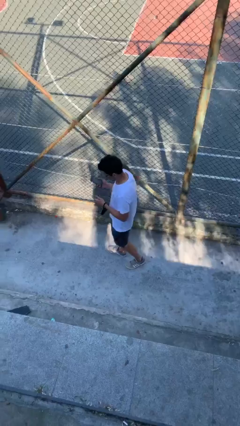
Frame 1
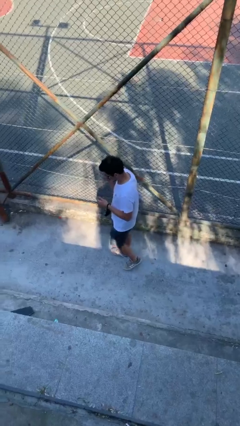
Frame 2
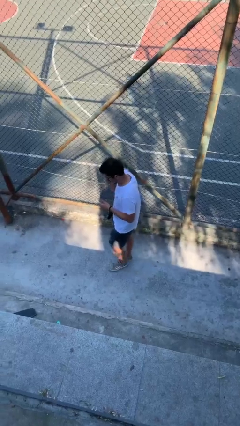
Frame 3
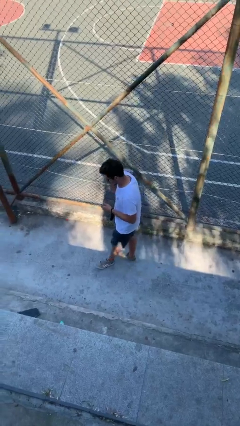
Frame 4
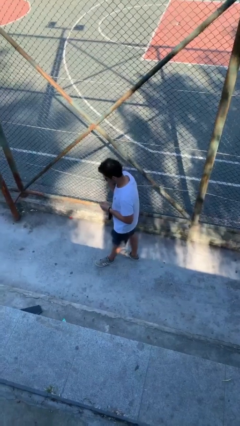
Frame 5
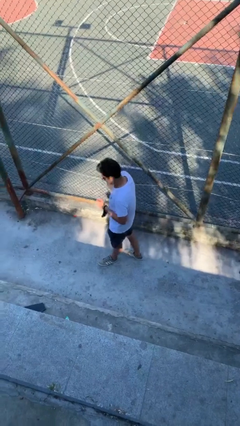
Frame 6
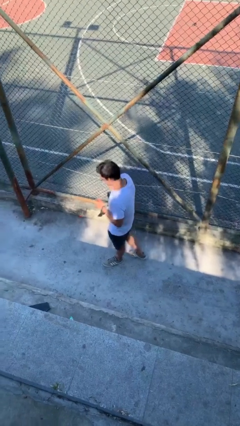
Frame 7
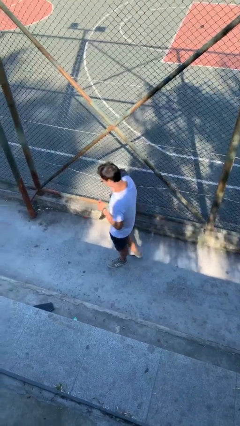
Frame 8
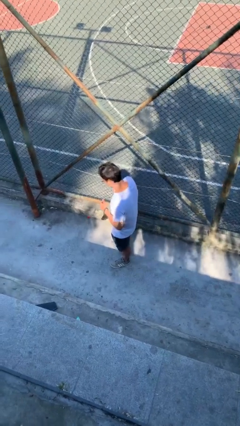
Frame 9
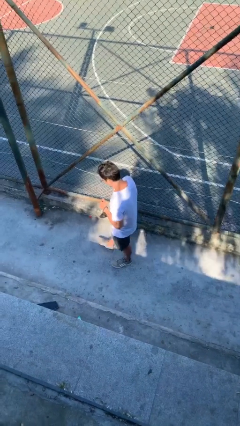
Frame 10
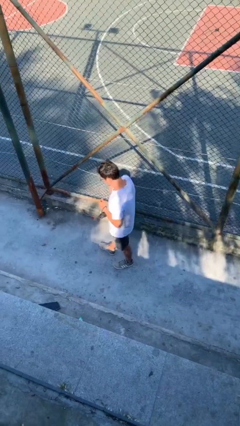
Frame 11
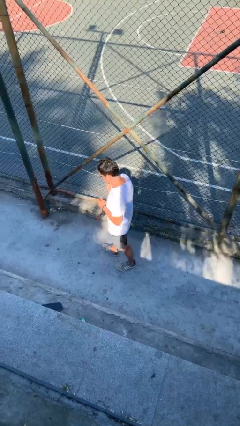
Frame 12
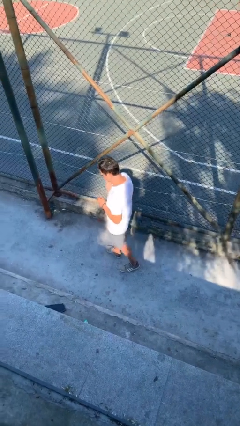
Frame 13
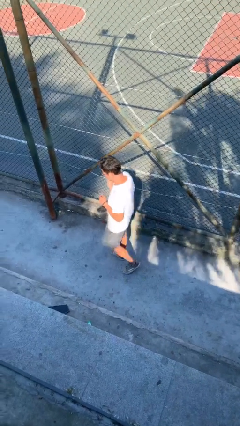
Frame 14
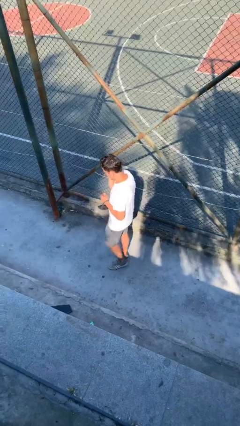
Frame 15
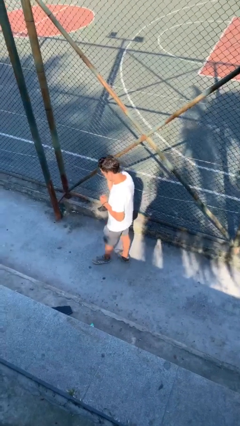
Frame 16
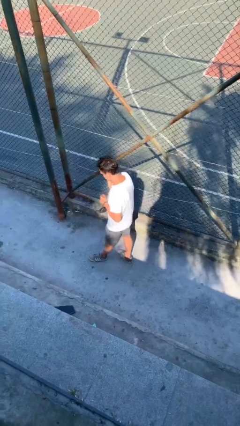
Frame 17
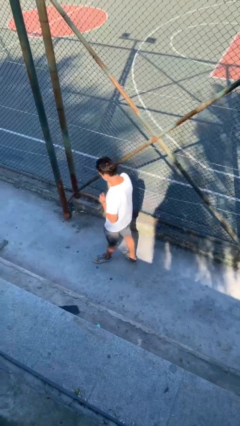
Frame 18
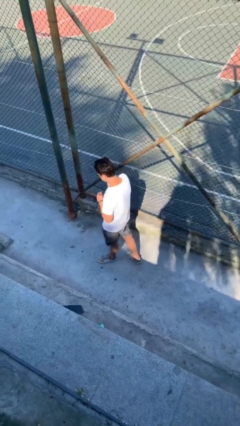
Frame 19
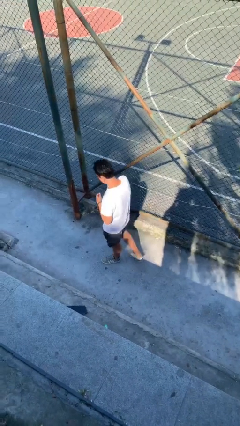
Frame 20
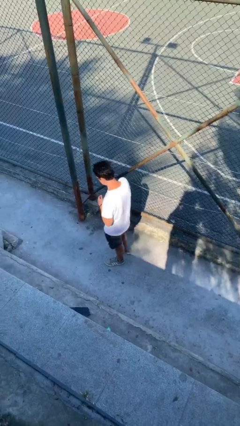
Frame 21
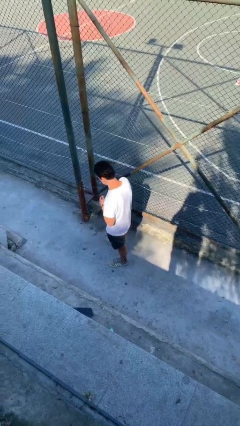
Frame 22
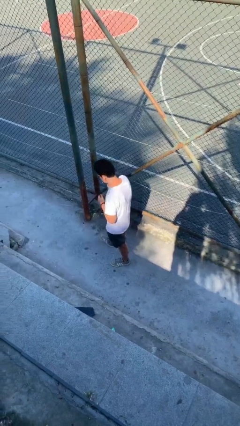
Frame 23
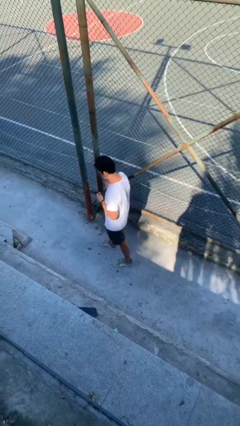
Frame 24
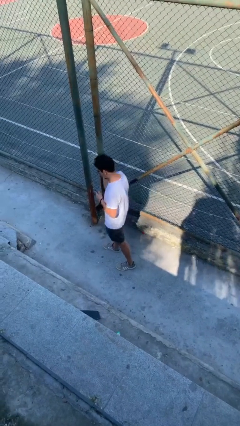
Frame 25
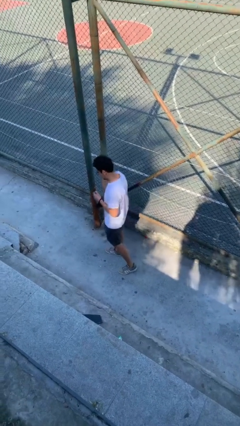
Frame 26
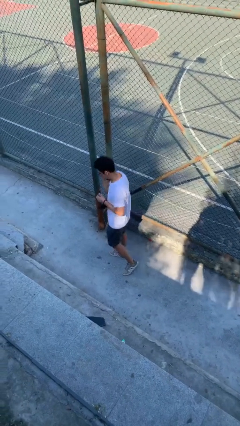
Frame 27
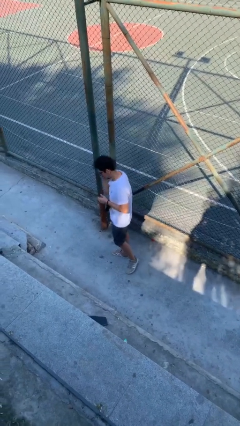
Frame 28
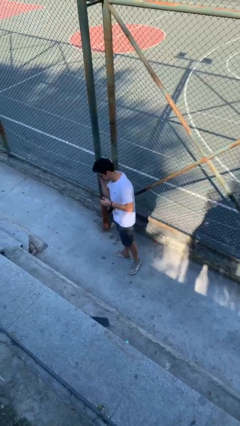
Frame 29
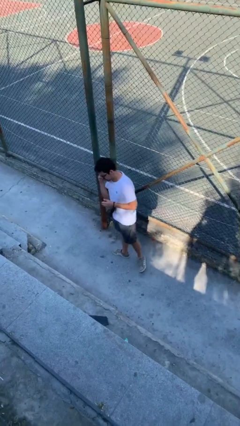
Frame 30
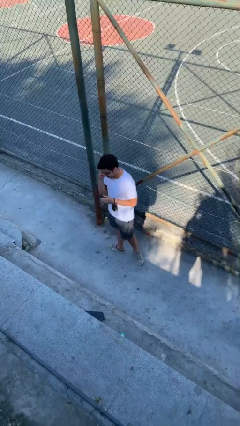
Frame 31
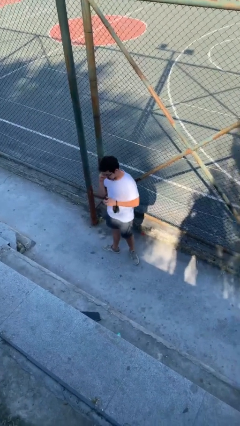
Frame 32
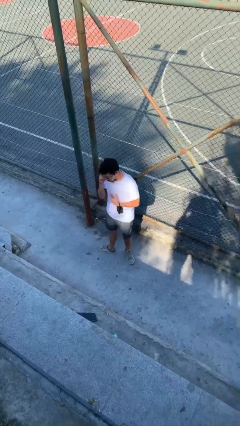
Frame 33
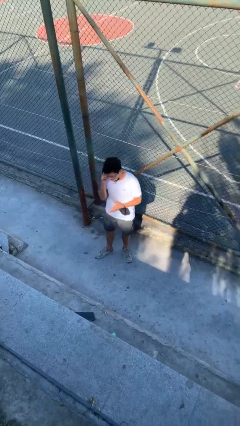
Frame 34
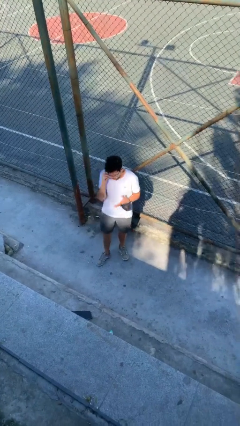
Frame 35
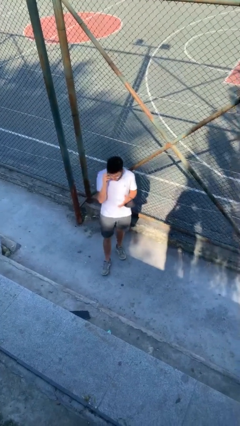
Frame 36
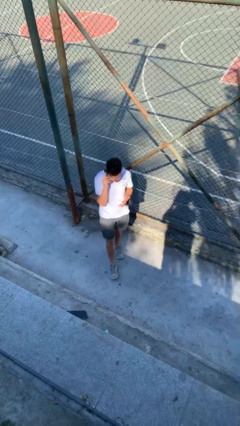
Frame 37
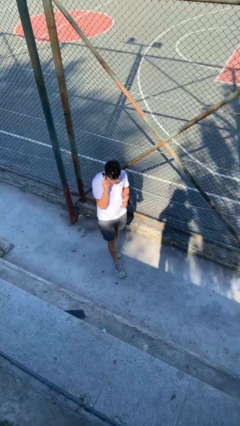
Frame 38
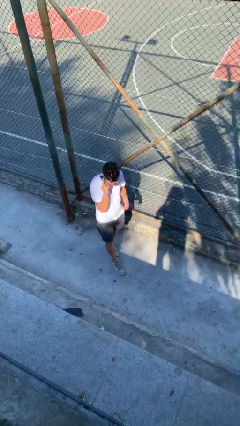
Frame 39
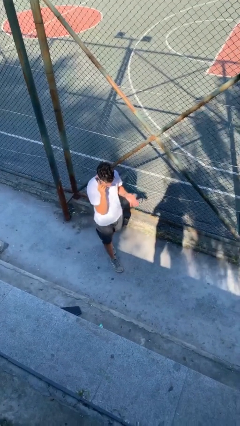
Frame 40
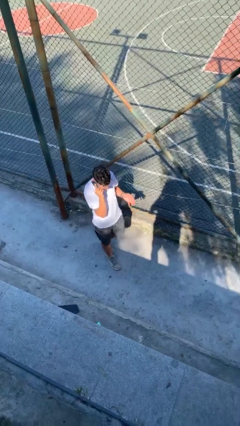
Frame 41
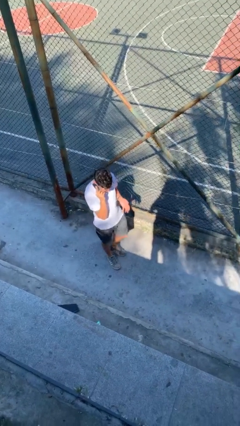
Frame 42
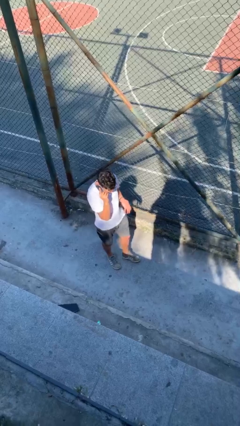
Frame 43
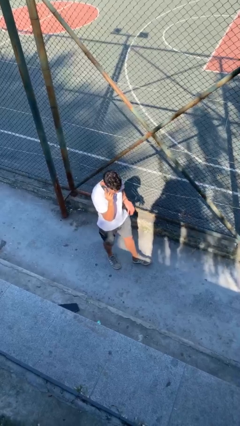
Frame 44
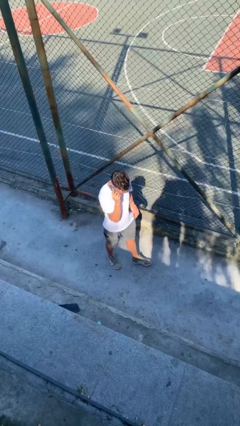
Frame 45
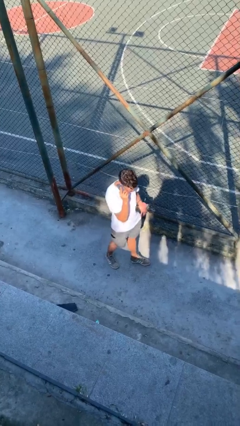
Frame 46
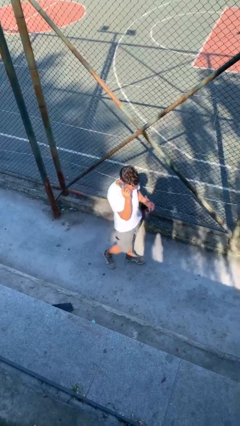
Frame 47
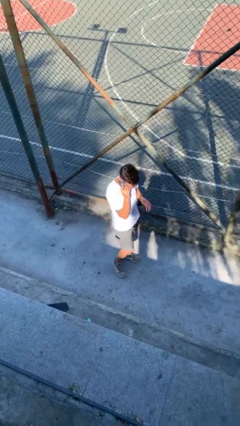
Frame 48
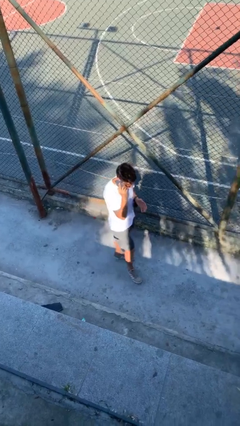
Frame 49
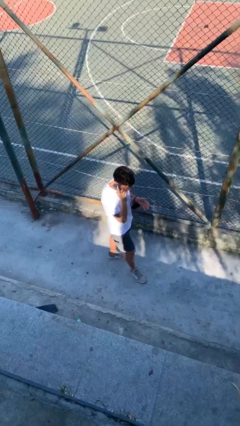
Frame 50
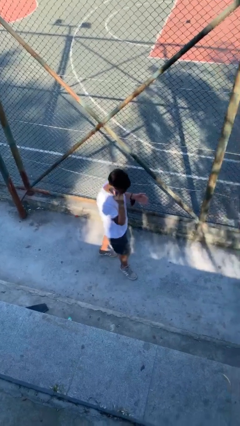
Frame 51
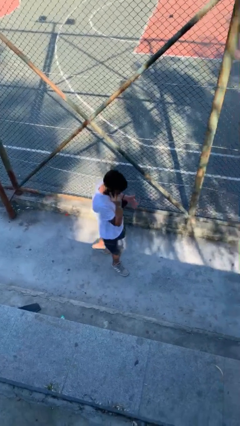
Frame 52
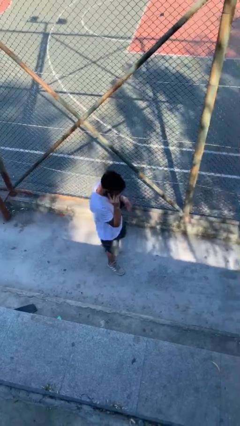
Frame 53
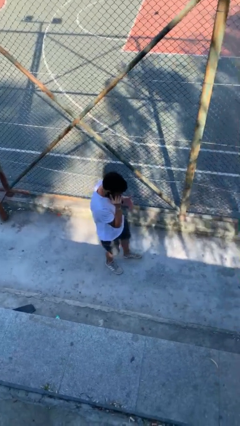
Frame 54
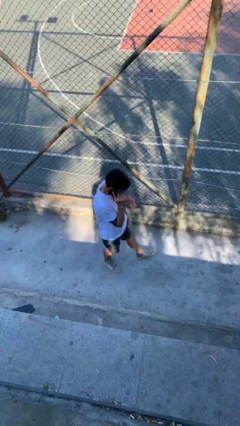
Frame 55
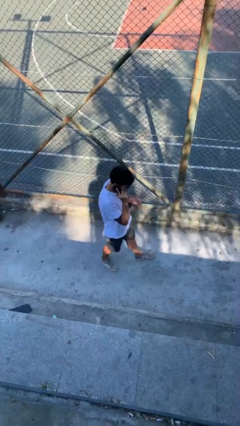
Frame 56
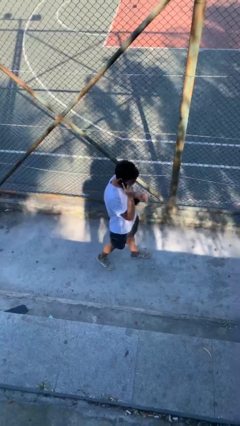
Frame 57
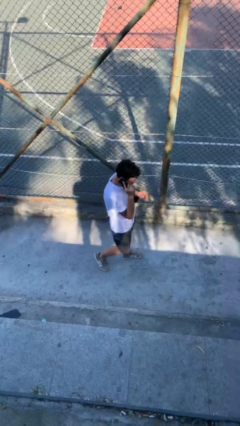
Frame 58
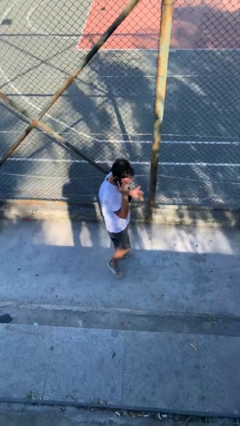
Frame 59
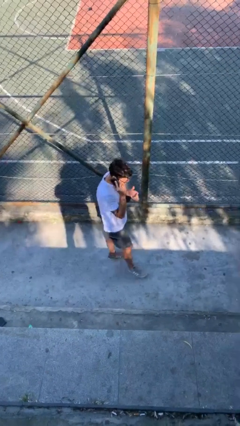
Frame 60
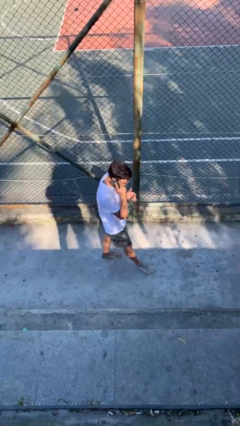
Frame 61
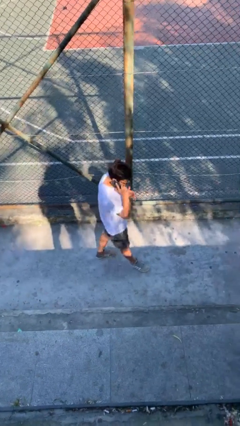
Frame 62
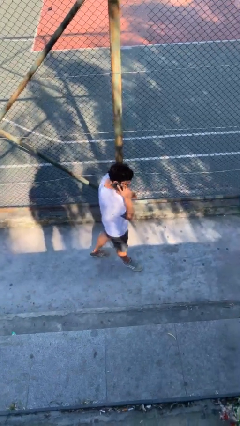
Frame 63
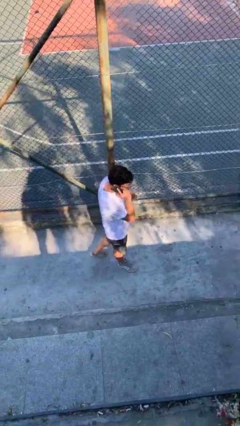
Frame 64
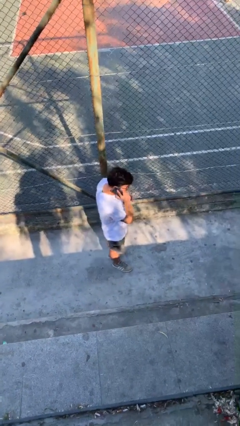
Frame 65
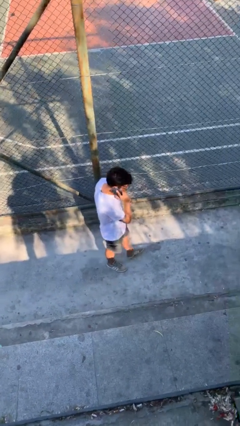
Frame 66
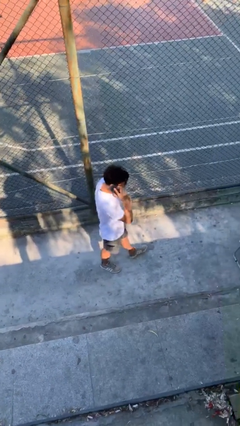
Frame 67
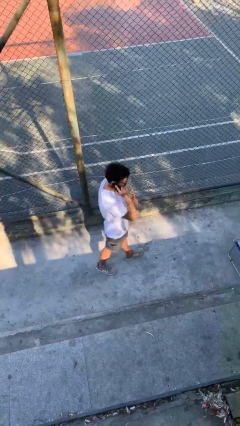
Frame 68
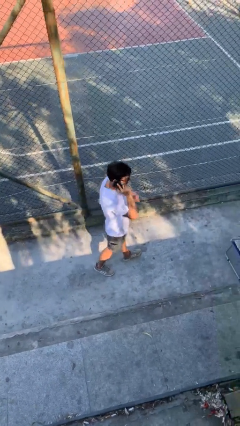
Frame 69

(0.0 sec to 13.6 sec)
person talks on phone

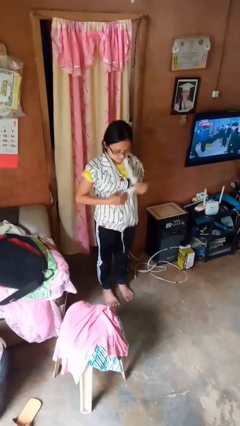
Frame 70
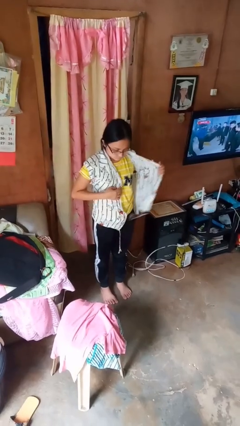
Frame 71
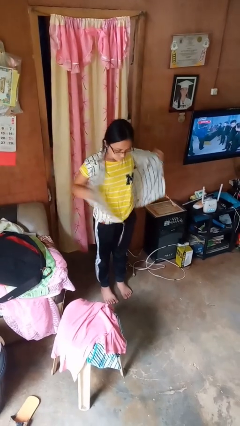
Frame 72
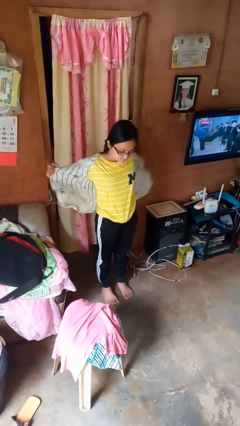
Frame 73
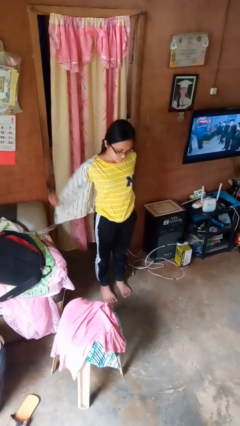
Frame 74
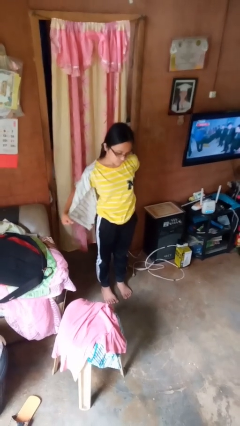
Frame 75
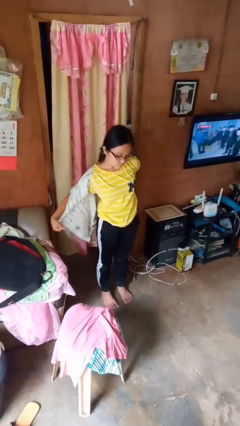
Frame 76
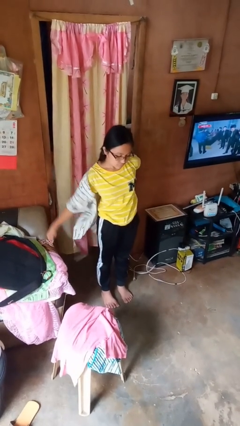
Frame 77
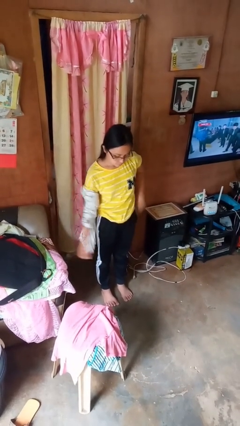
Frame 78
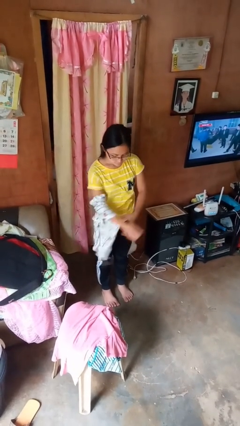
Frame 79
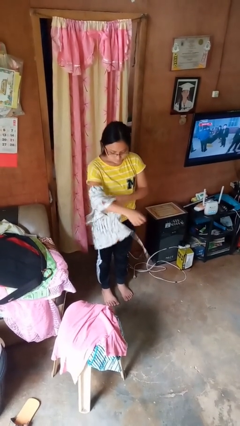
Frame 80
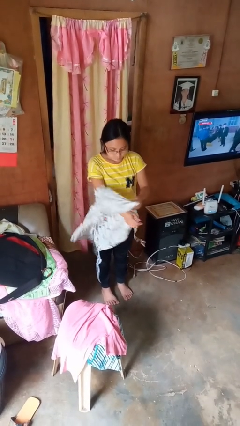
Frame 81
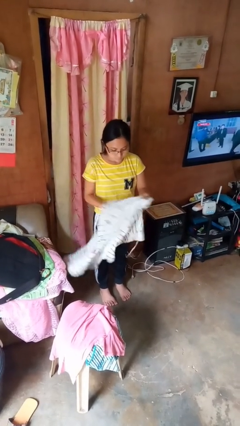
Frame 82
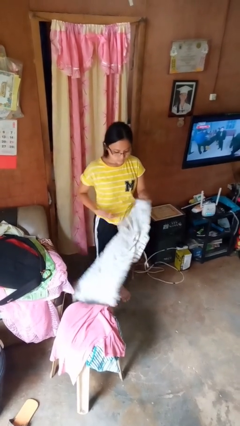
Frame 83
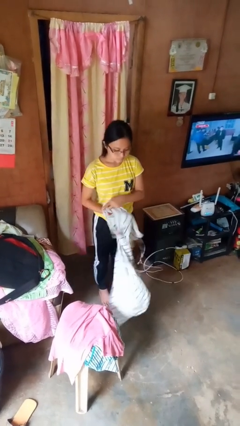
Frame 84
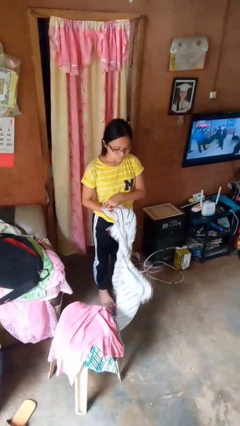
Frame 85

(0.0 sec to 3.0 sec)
person takes off shirt

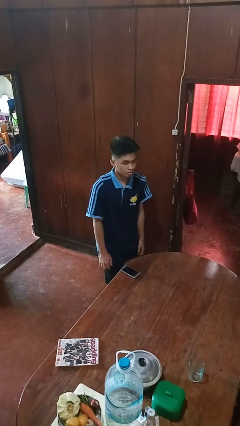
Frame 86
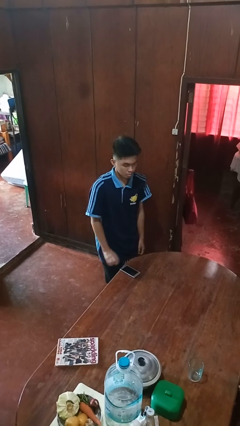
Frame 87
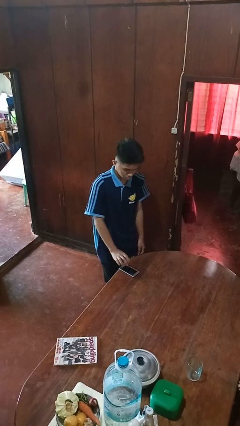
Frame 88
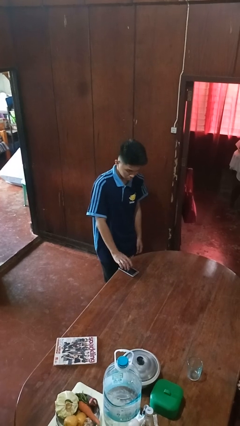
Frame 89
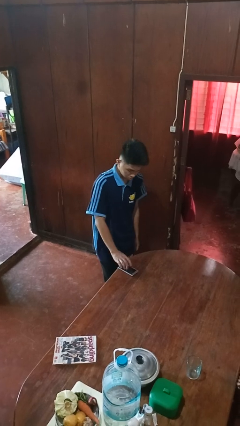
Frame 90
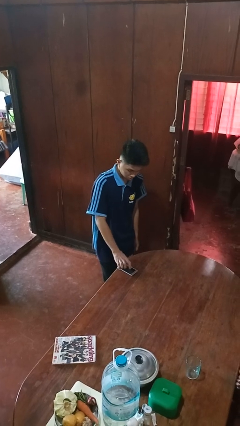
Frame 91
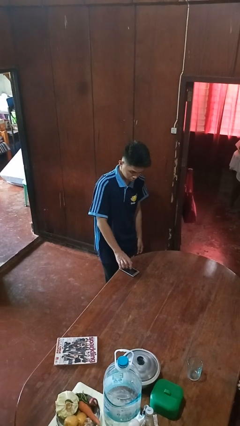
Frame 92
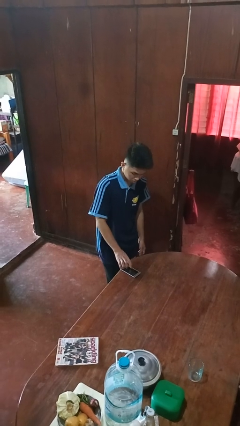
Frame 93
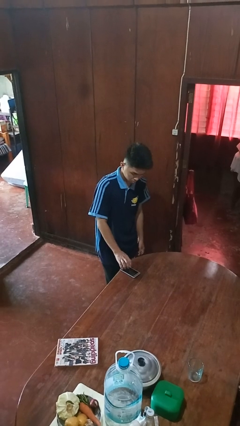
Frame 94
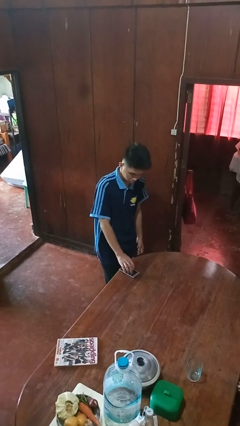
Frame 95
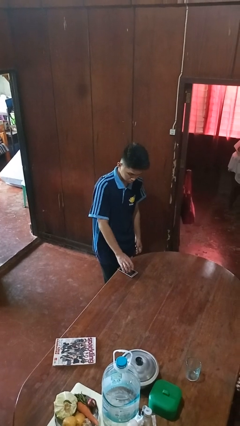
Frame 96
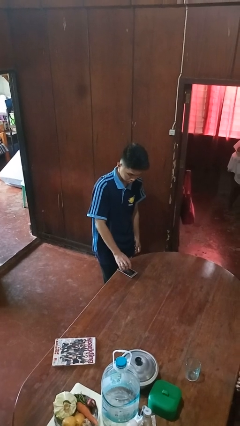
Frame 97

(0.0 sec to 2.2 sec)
person taps object with finger
